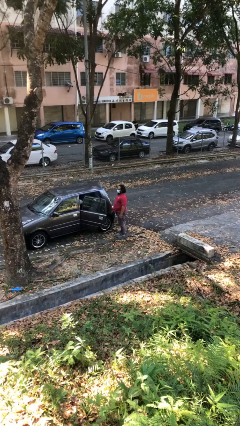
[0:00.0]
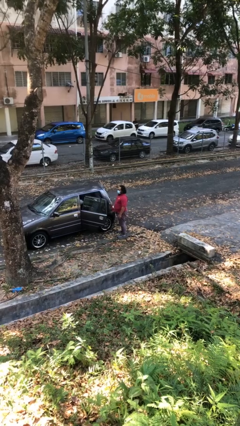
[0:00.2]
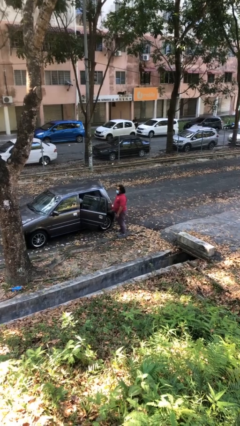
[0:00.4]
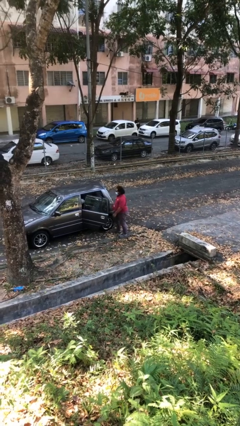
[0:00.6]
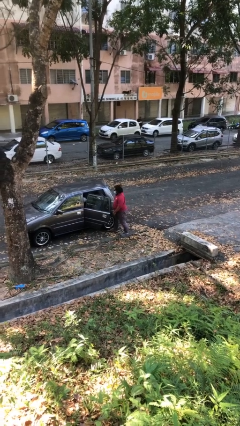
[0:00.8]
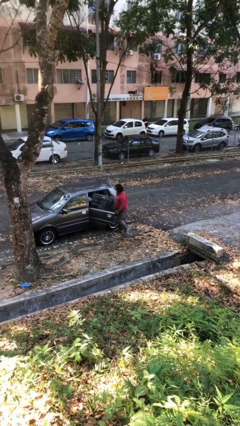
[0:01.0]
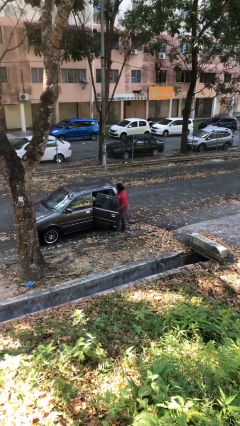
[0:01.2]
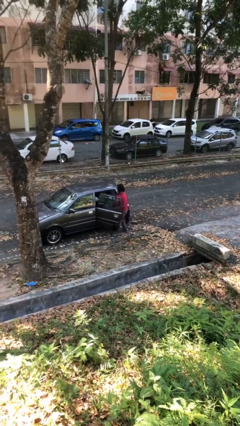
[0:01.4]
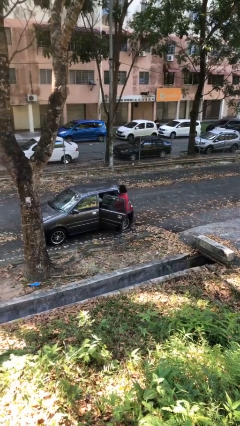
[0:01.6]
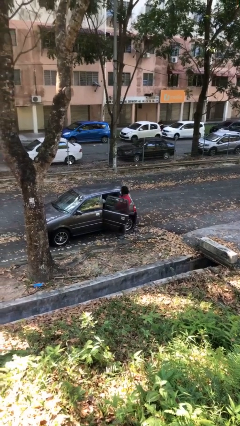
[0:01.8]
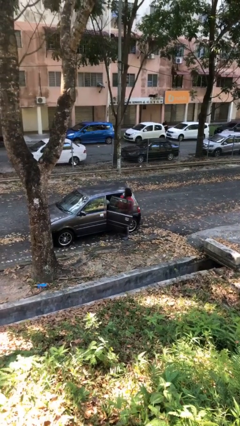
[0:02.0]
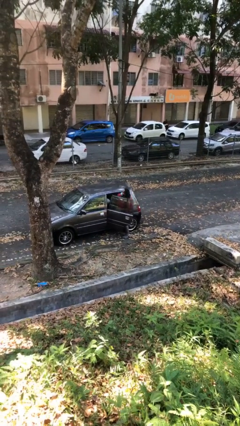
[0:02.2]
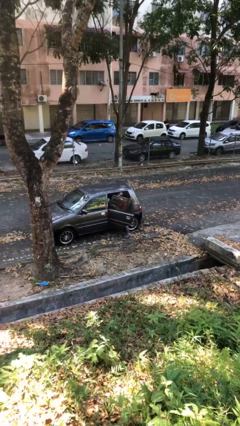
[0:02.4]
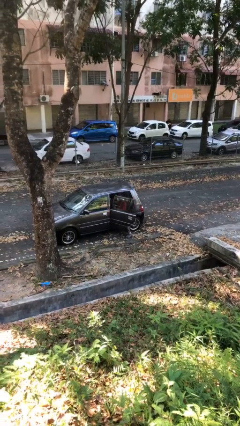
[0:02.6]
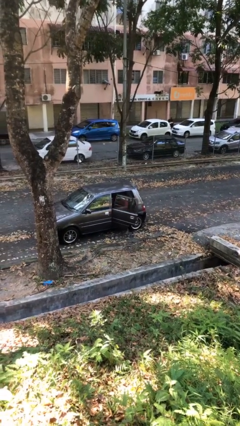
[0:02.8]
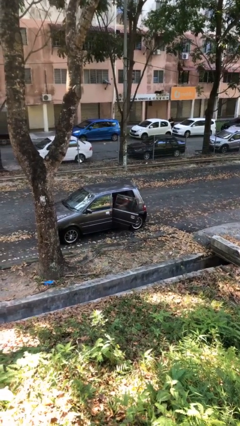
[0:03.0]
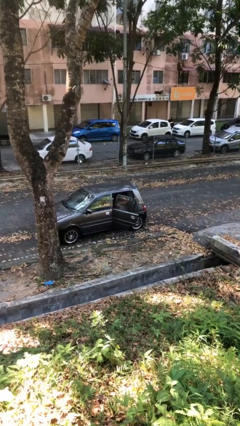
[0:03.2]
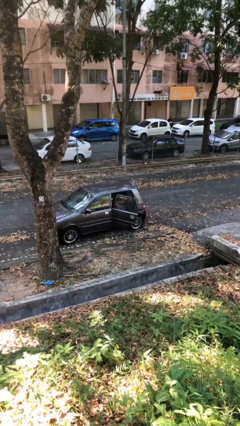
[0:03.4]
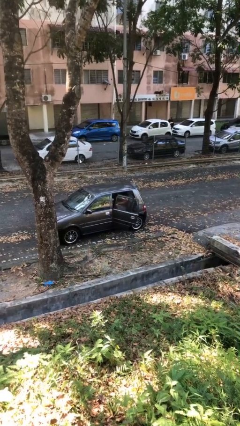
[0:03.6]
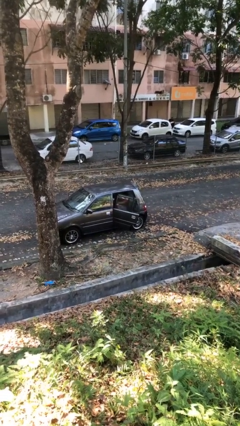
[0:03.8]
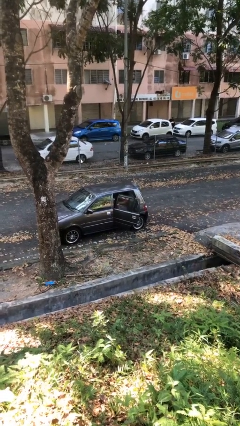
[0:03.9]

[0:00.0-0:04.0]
person enters car

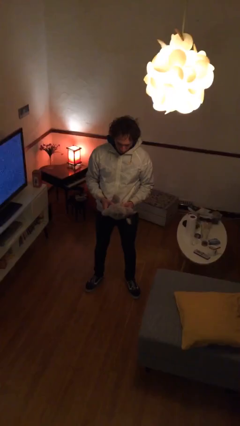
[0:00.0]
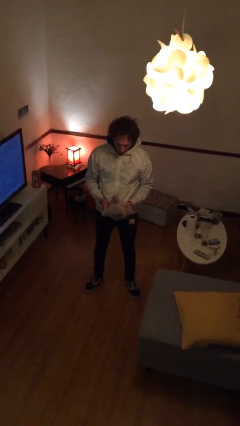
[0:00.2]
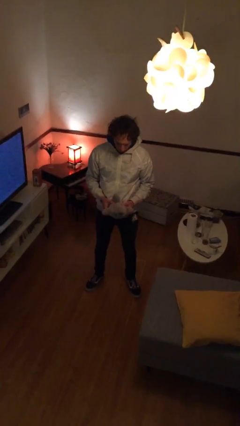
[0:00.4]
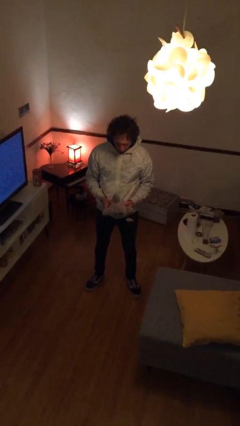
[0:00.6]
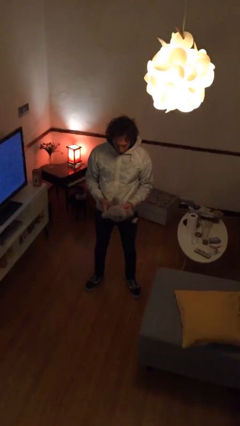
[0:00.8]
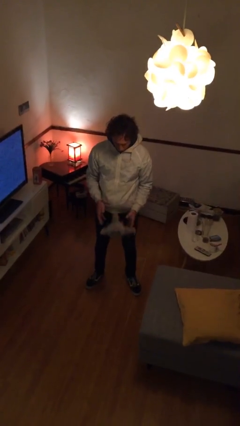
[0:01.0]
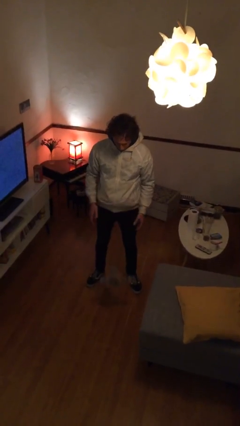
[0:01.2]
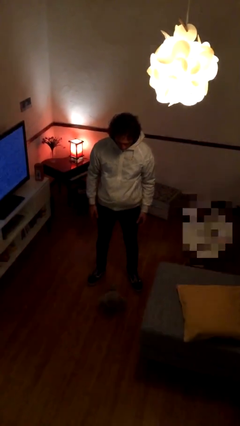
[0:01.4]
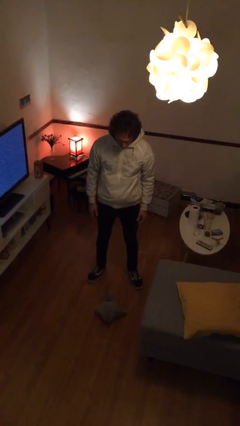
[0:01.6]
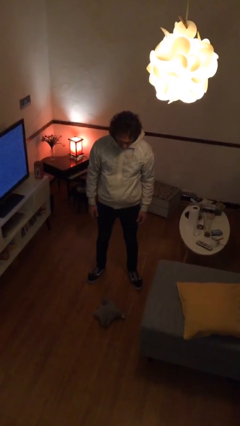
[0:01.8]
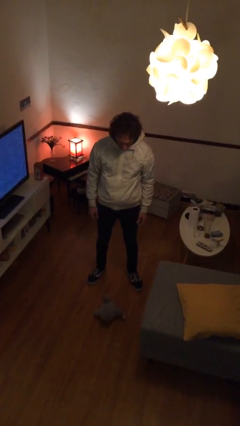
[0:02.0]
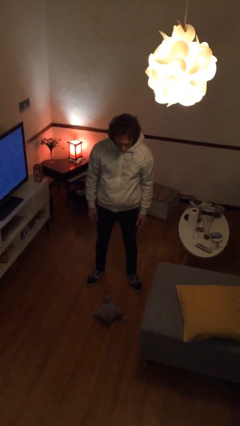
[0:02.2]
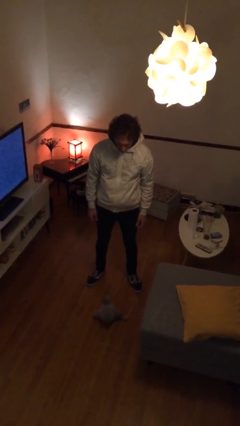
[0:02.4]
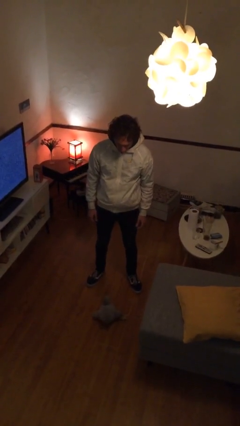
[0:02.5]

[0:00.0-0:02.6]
person drops object

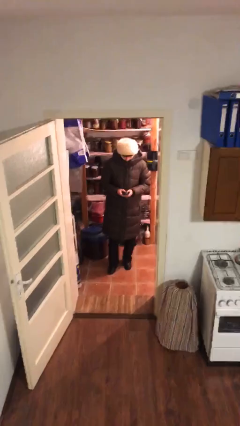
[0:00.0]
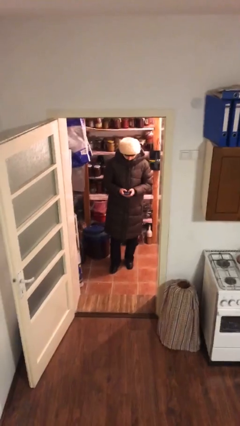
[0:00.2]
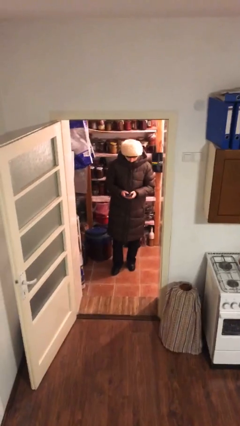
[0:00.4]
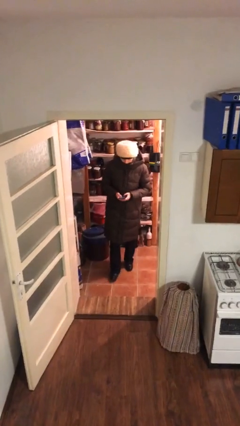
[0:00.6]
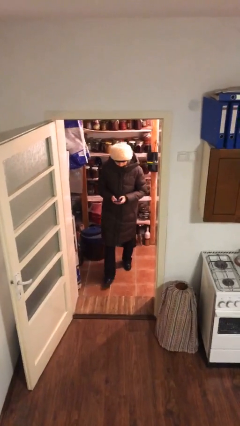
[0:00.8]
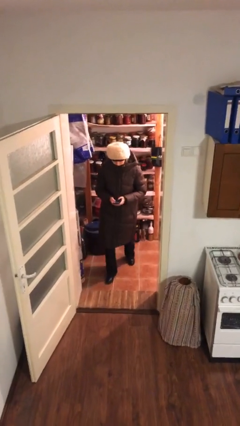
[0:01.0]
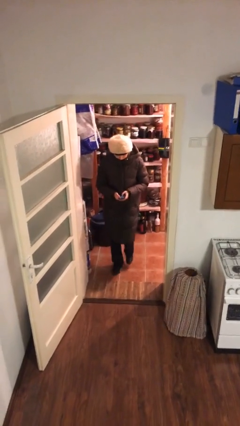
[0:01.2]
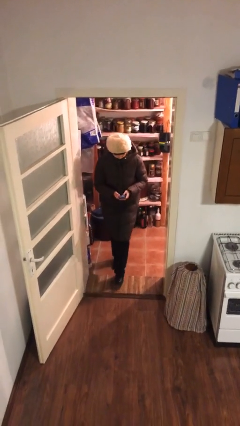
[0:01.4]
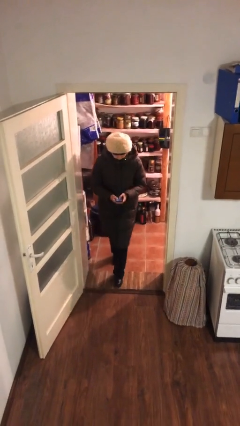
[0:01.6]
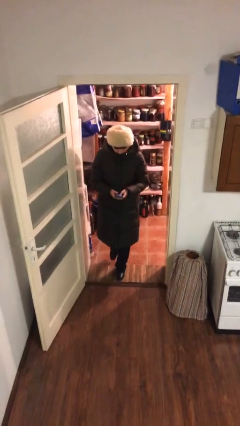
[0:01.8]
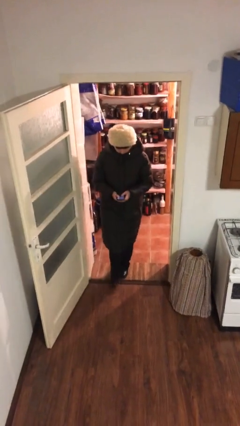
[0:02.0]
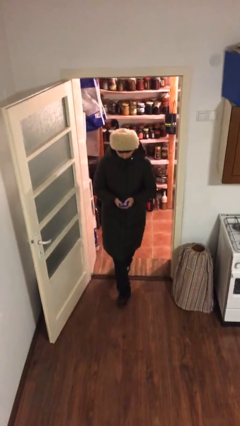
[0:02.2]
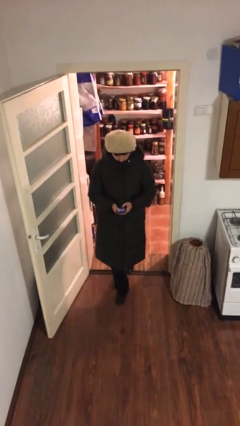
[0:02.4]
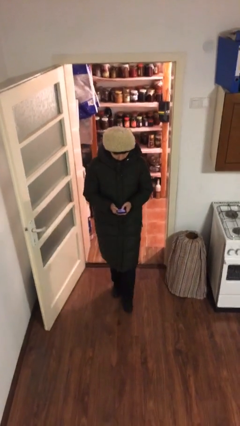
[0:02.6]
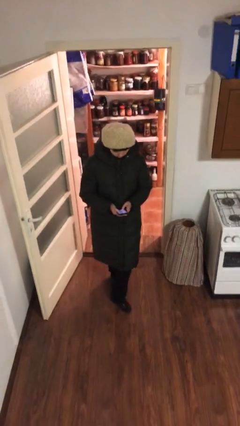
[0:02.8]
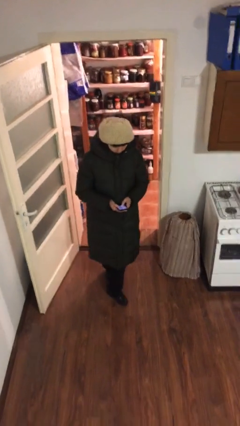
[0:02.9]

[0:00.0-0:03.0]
person enters scene through structure

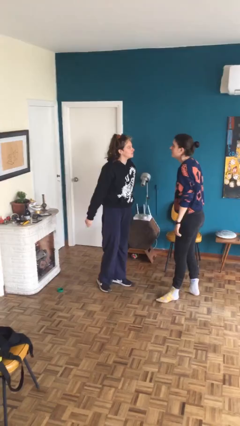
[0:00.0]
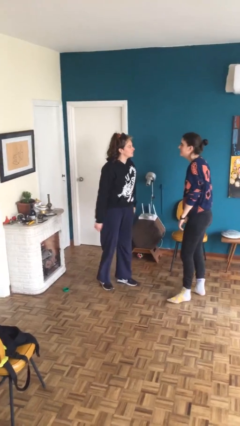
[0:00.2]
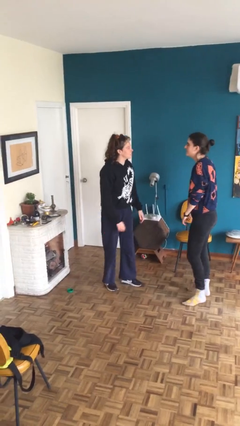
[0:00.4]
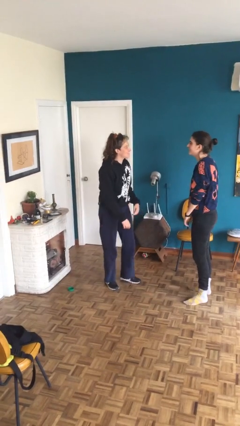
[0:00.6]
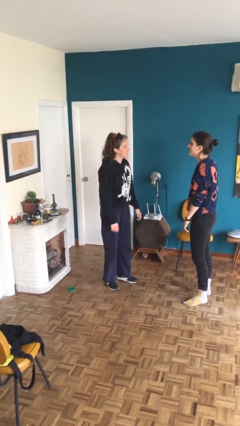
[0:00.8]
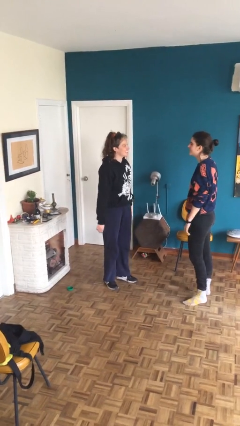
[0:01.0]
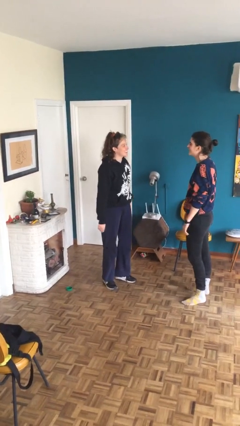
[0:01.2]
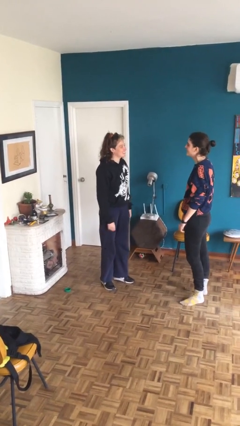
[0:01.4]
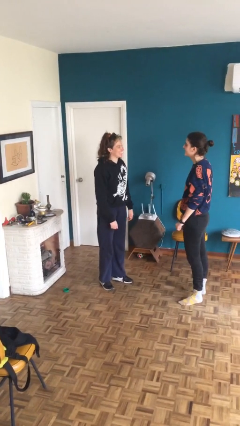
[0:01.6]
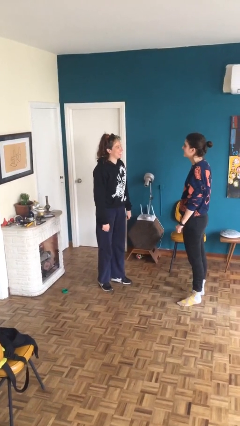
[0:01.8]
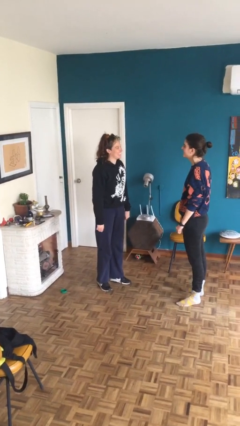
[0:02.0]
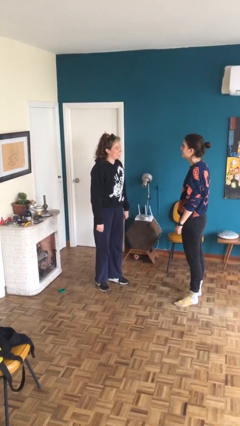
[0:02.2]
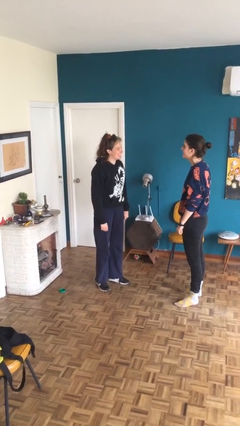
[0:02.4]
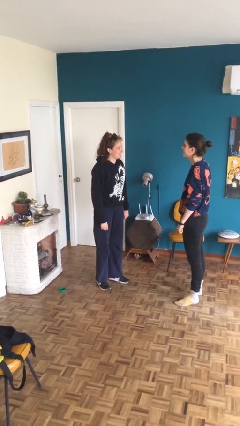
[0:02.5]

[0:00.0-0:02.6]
person talks to person

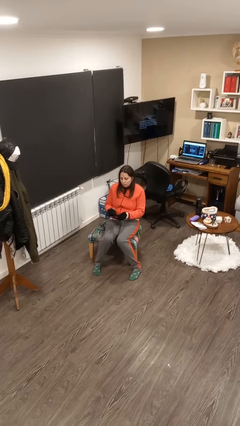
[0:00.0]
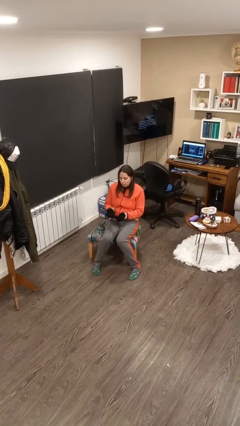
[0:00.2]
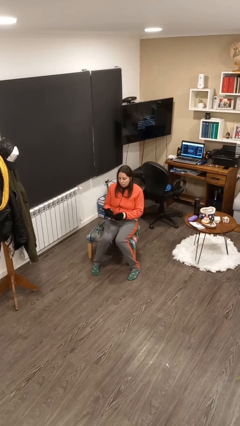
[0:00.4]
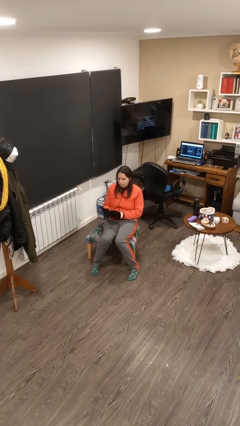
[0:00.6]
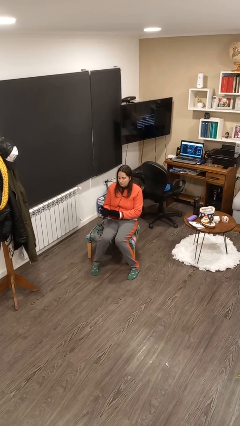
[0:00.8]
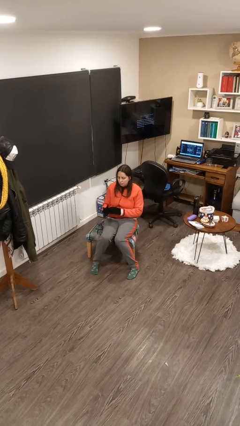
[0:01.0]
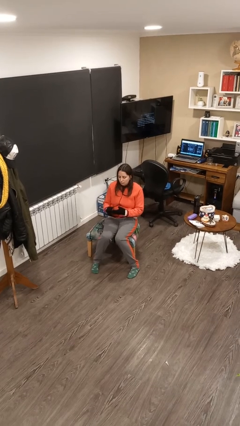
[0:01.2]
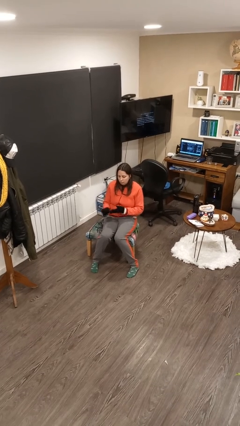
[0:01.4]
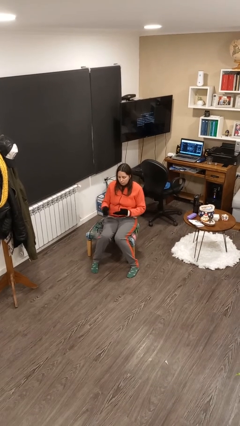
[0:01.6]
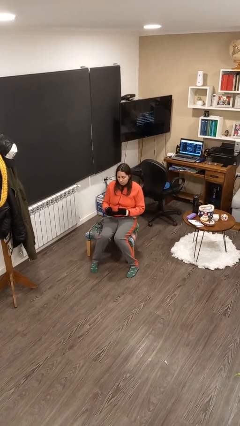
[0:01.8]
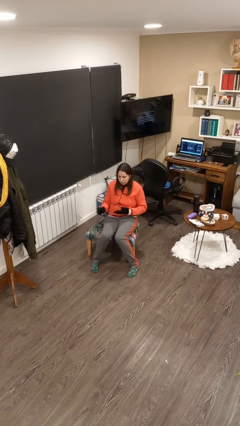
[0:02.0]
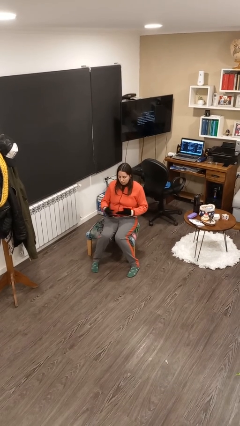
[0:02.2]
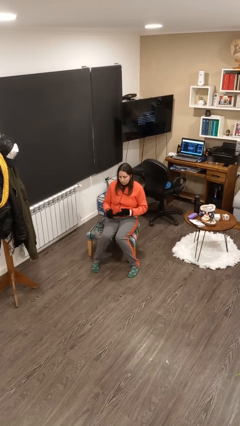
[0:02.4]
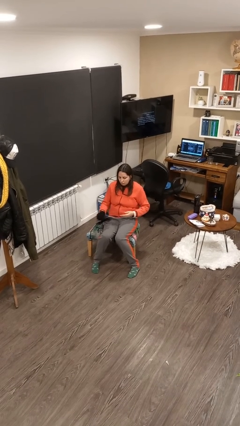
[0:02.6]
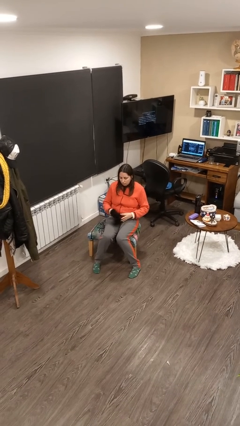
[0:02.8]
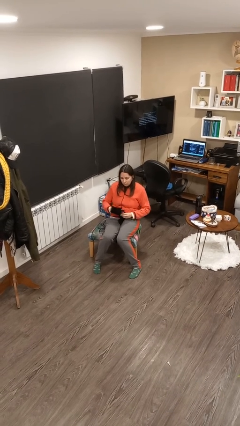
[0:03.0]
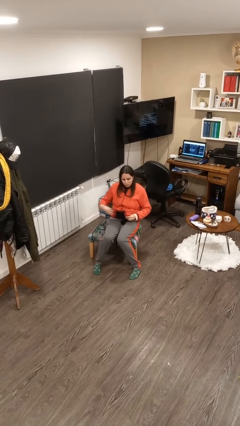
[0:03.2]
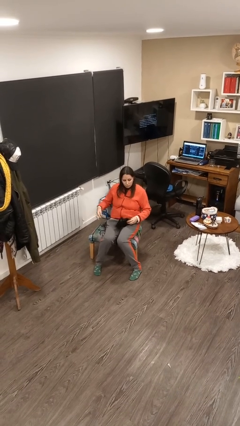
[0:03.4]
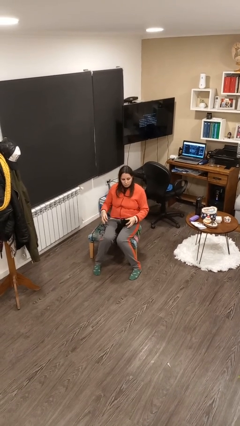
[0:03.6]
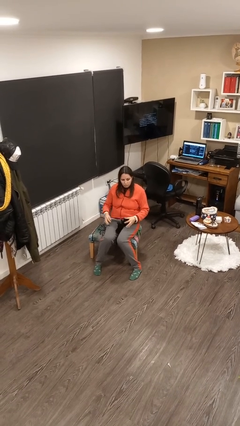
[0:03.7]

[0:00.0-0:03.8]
person takes off gloves

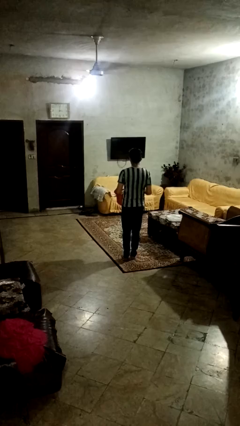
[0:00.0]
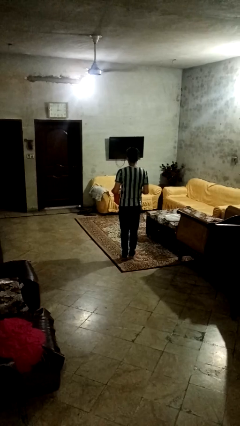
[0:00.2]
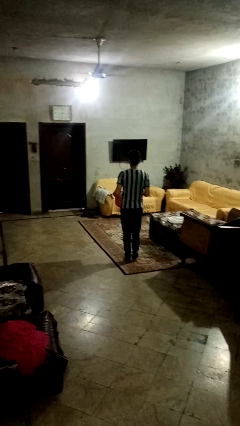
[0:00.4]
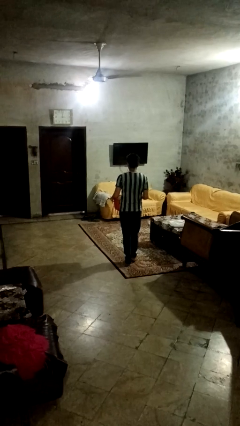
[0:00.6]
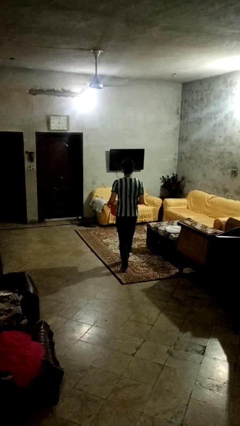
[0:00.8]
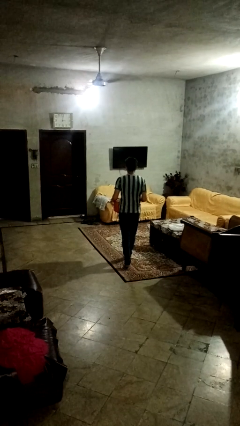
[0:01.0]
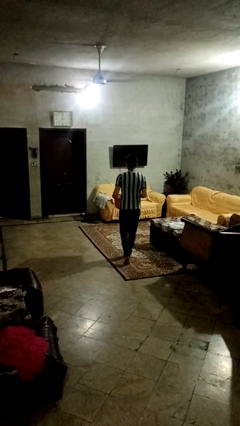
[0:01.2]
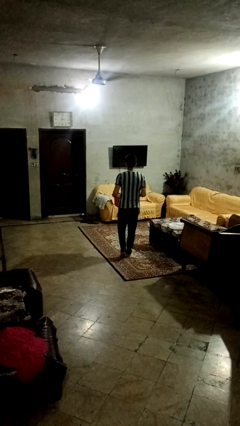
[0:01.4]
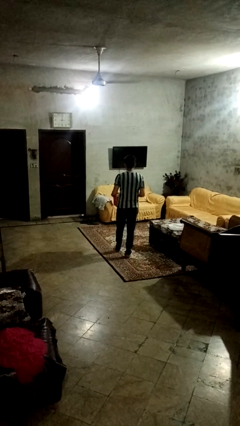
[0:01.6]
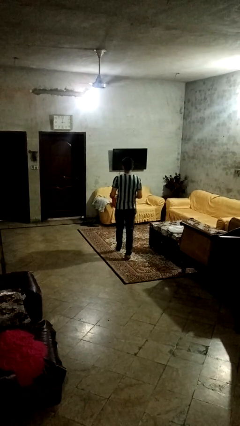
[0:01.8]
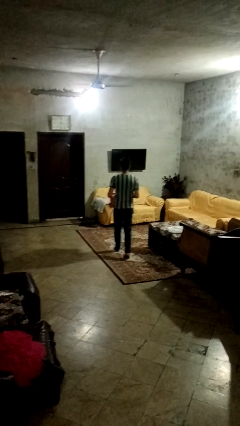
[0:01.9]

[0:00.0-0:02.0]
person carries laundry basket
